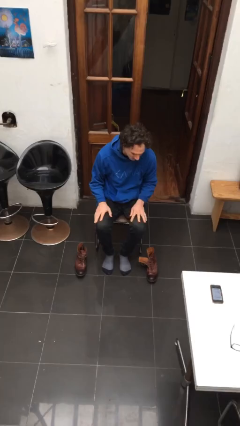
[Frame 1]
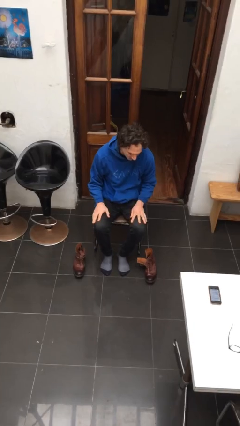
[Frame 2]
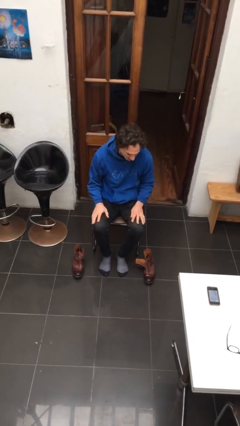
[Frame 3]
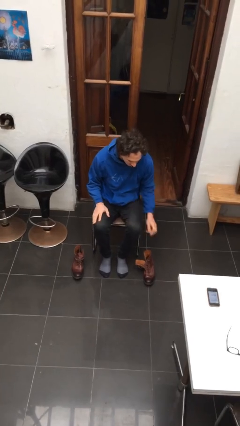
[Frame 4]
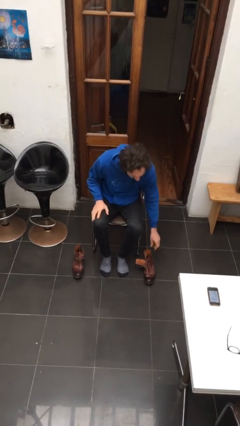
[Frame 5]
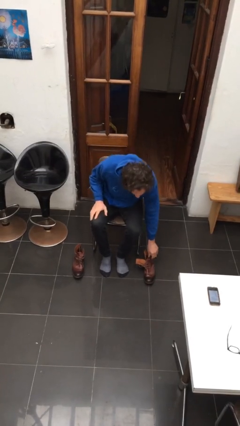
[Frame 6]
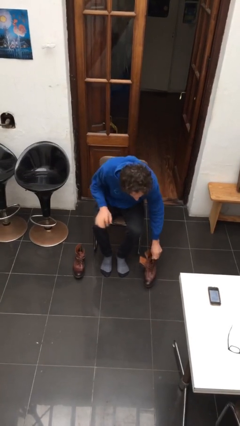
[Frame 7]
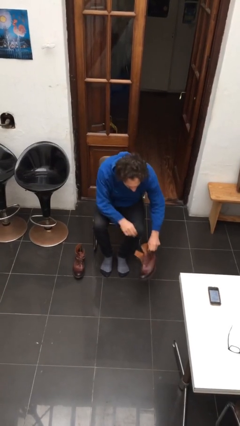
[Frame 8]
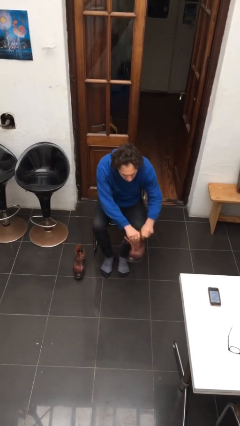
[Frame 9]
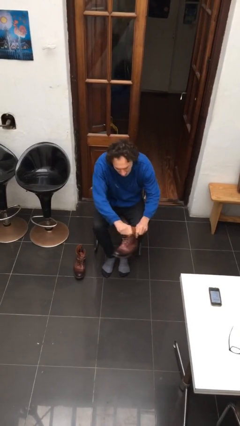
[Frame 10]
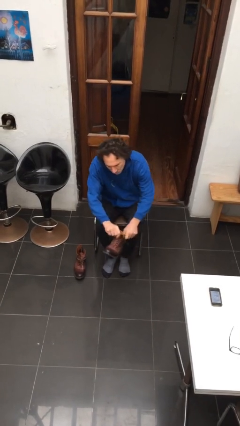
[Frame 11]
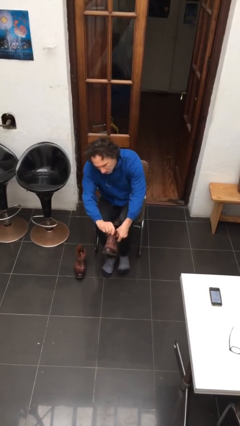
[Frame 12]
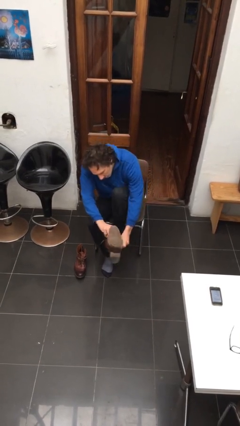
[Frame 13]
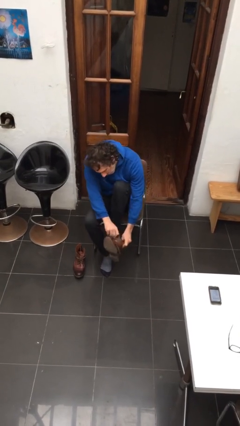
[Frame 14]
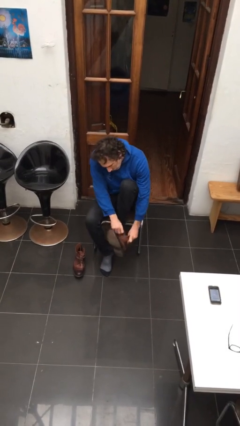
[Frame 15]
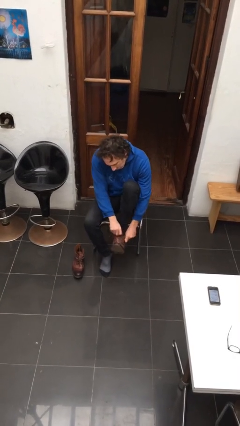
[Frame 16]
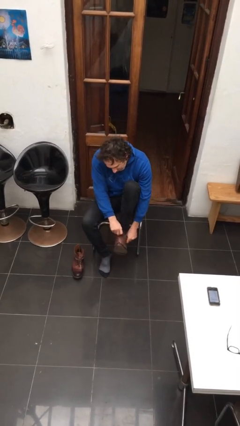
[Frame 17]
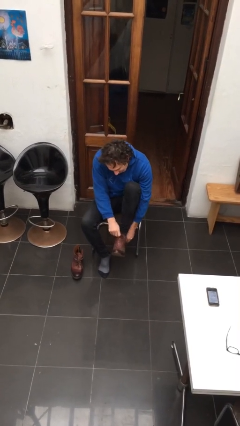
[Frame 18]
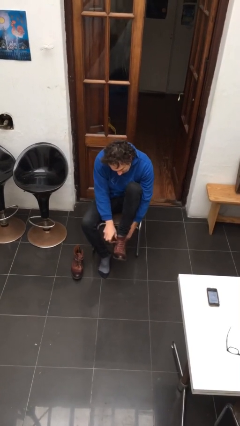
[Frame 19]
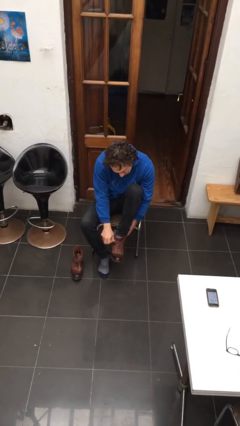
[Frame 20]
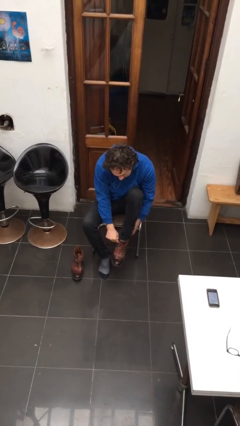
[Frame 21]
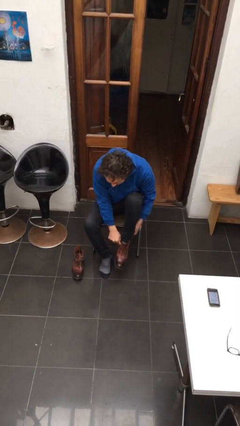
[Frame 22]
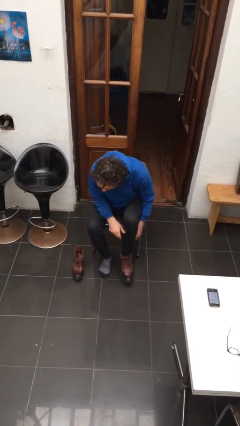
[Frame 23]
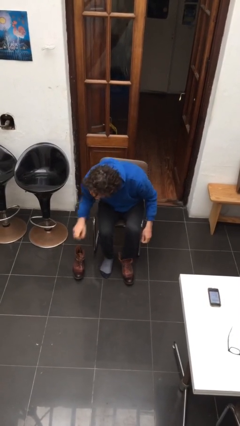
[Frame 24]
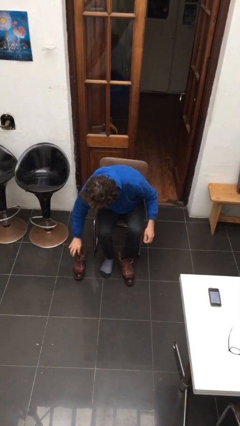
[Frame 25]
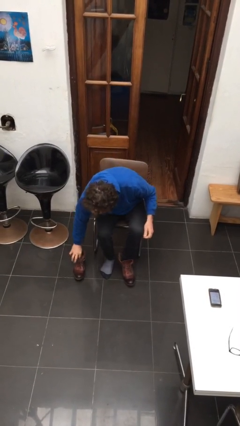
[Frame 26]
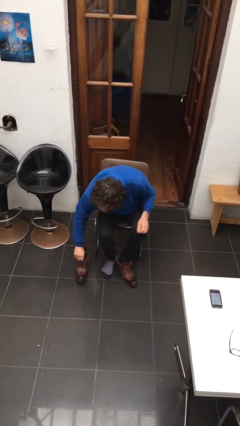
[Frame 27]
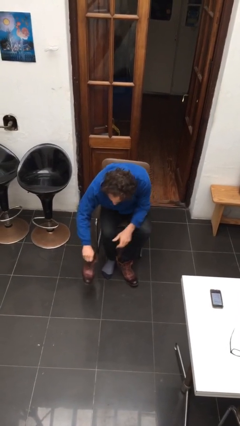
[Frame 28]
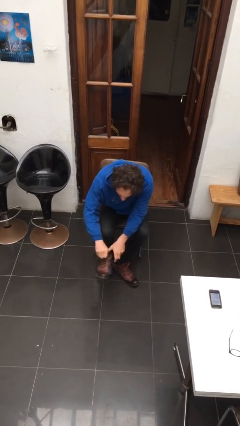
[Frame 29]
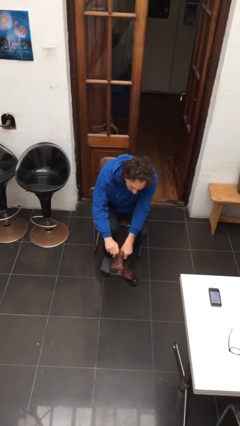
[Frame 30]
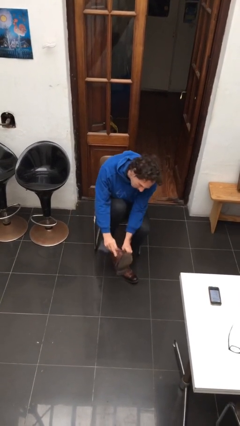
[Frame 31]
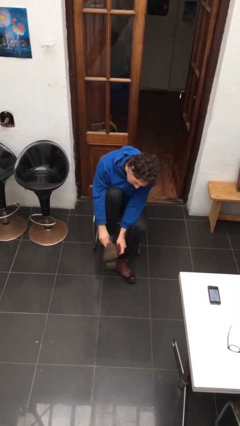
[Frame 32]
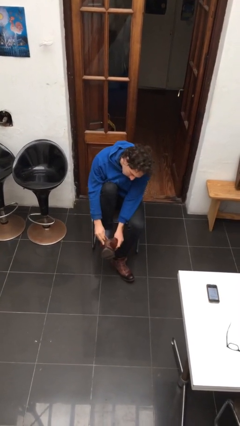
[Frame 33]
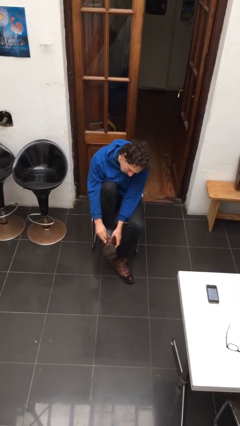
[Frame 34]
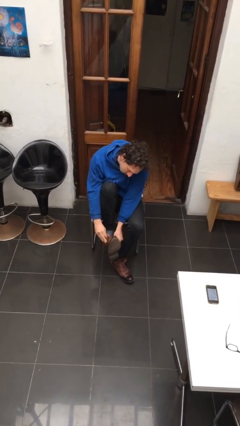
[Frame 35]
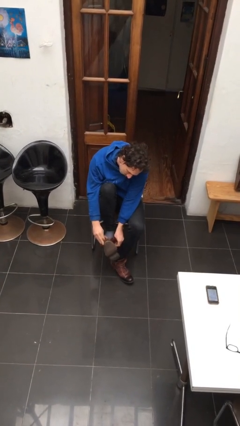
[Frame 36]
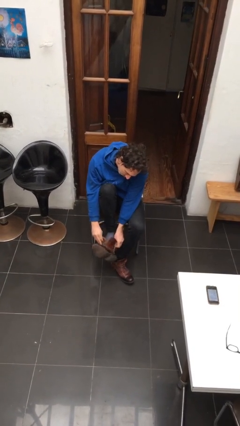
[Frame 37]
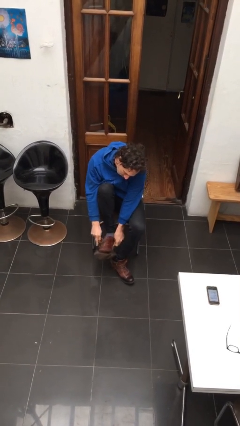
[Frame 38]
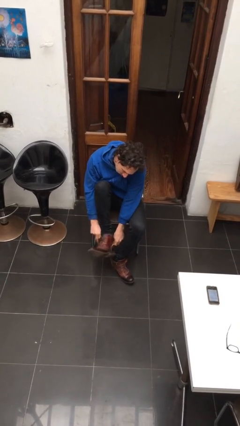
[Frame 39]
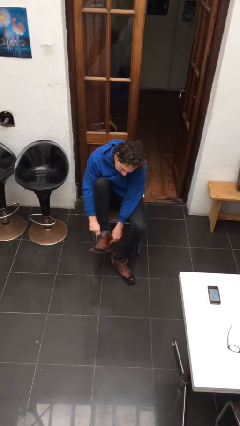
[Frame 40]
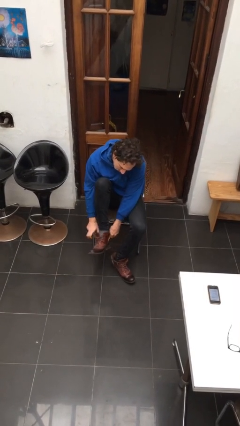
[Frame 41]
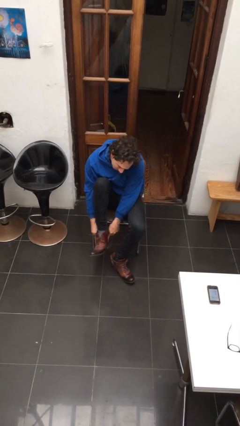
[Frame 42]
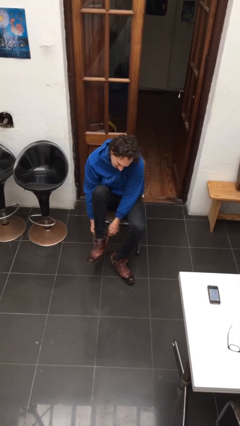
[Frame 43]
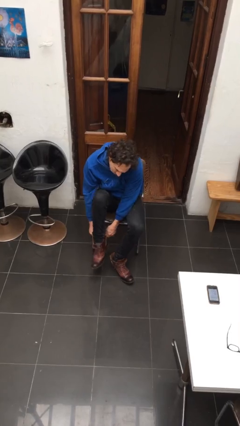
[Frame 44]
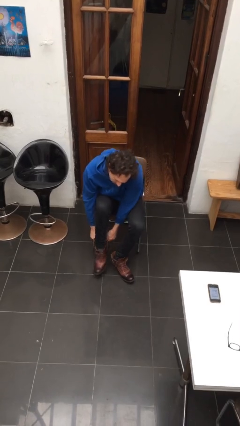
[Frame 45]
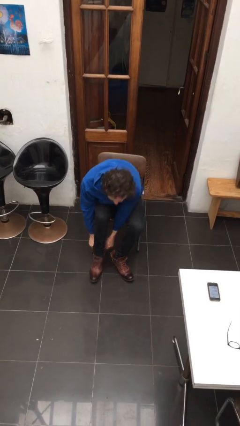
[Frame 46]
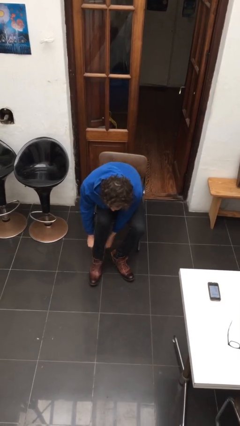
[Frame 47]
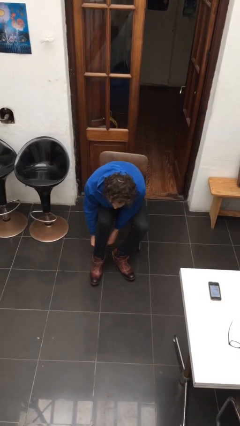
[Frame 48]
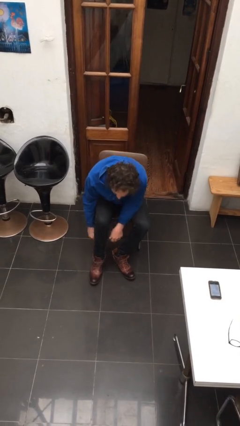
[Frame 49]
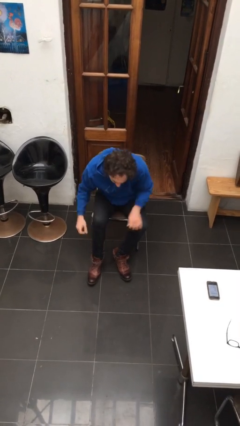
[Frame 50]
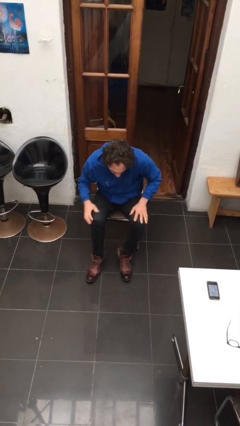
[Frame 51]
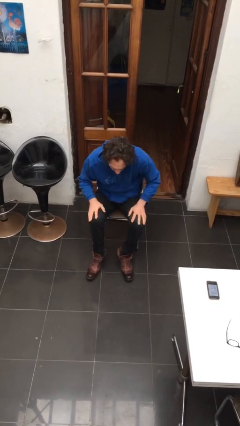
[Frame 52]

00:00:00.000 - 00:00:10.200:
person puts on boots

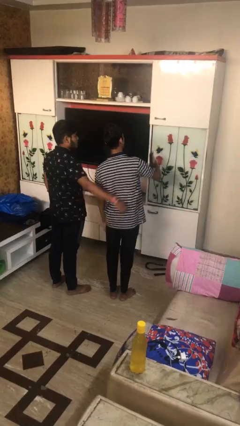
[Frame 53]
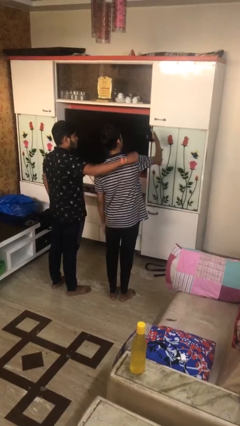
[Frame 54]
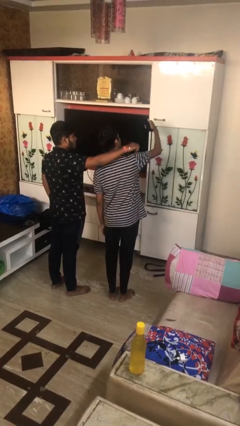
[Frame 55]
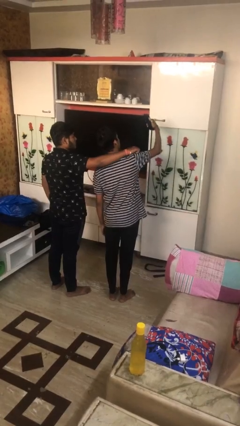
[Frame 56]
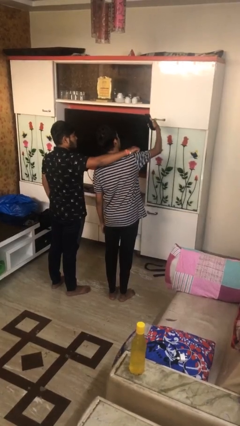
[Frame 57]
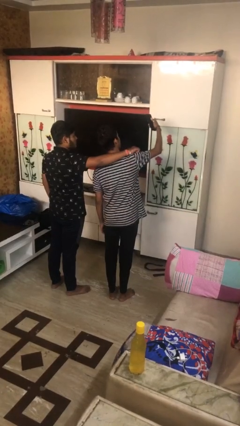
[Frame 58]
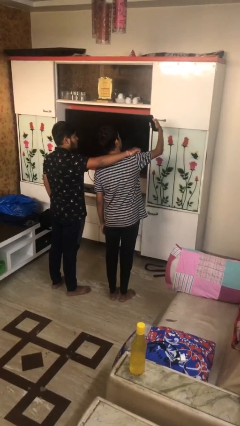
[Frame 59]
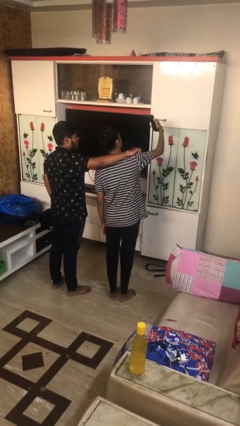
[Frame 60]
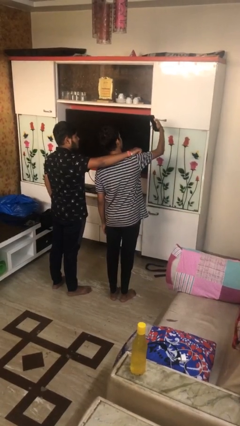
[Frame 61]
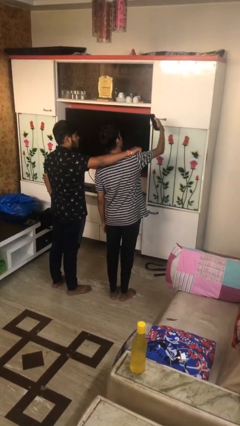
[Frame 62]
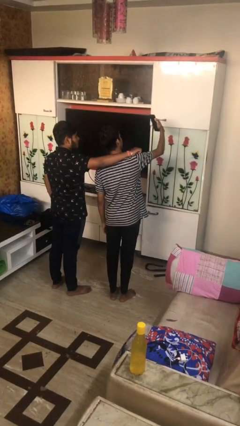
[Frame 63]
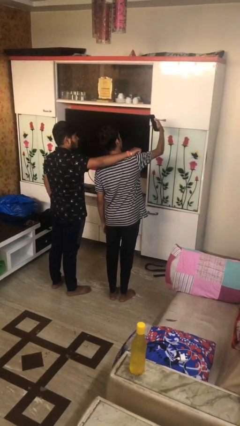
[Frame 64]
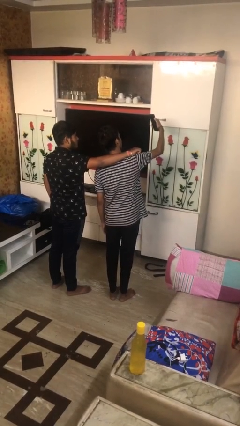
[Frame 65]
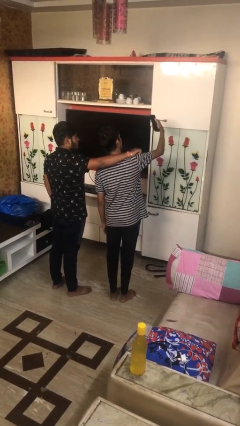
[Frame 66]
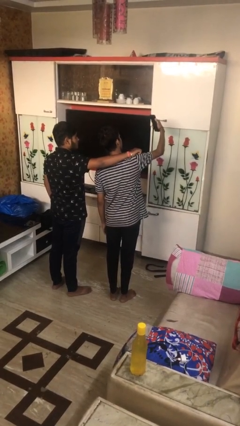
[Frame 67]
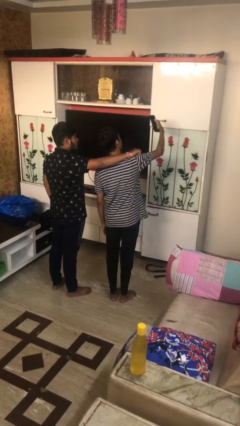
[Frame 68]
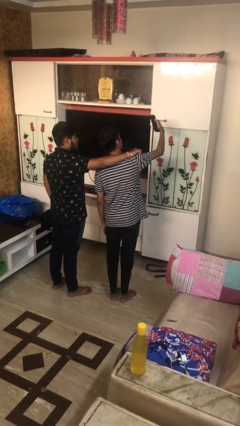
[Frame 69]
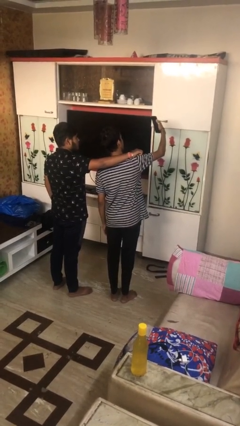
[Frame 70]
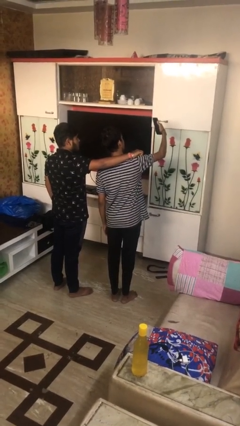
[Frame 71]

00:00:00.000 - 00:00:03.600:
person takes selfie with person

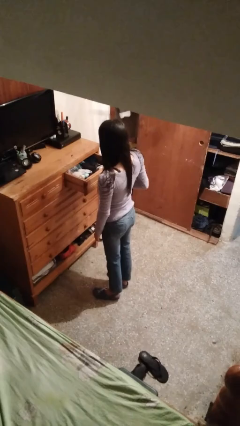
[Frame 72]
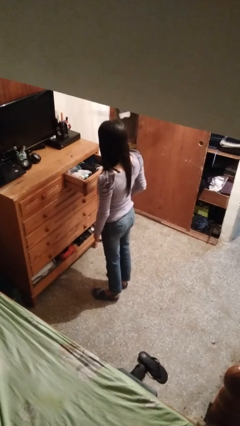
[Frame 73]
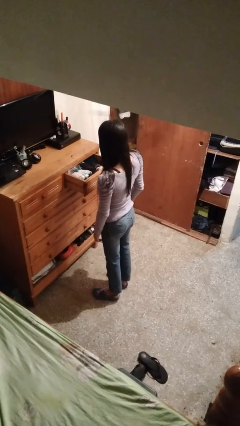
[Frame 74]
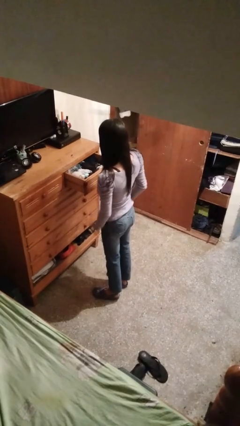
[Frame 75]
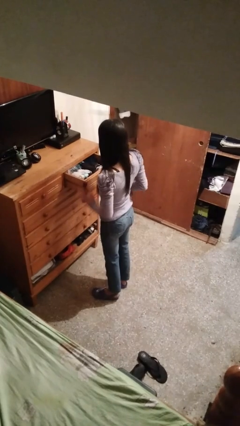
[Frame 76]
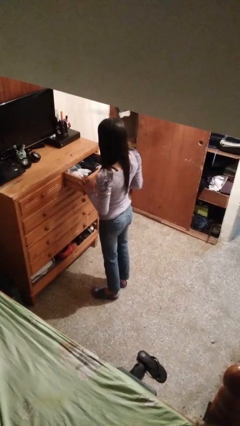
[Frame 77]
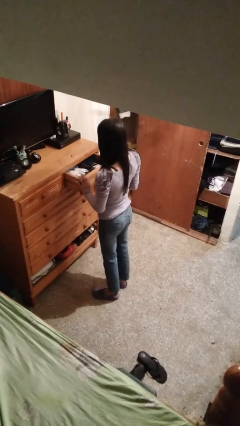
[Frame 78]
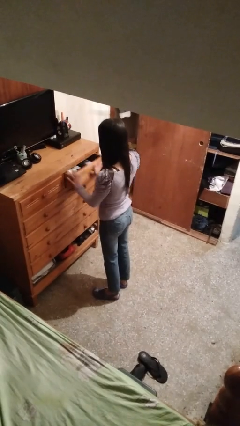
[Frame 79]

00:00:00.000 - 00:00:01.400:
person closes dresser drawer

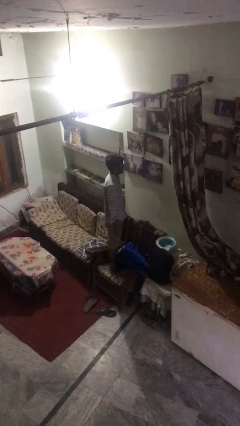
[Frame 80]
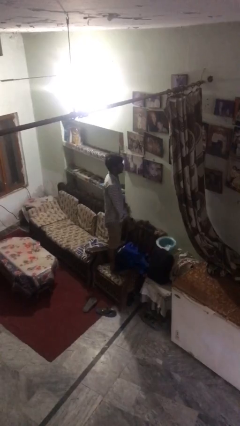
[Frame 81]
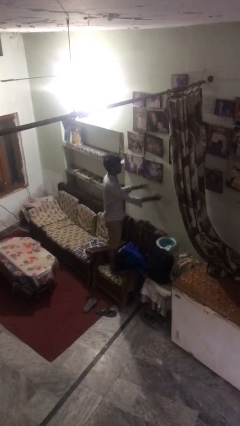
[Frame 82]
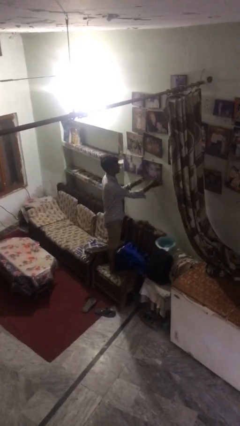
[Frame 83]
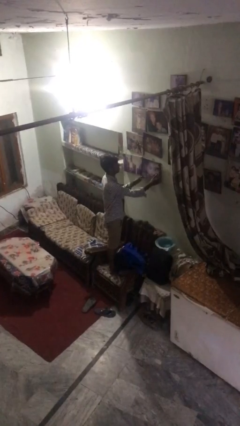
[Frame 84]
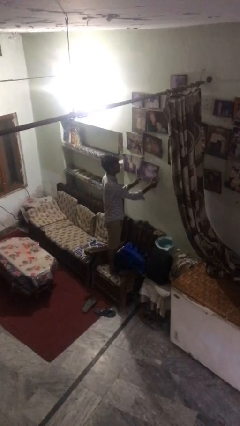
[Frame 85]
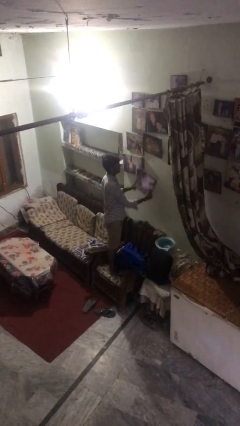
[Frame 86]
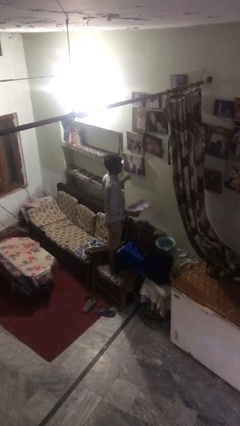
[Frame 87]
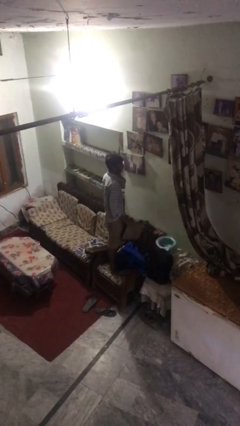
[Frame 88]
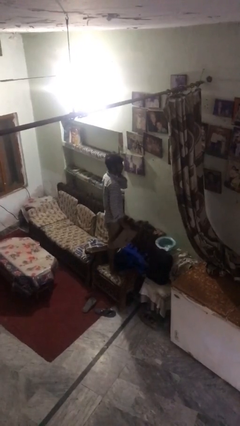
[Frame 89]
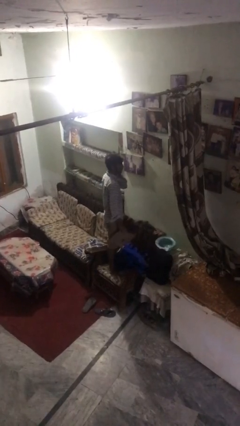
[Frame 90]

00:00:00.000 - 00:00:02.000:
person takes down picture frame

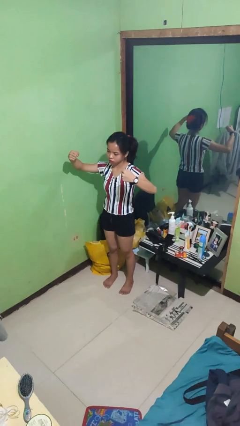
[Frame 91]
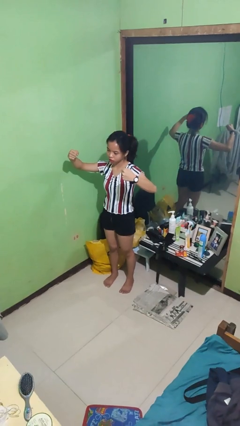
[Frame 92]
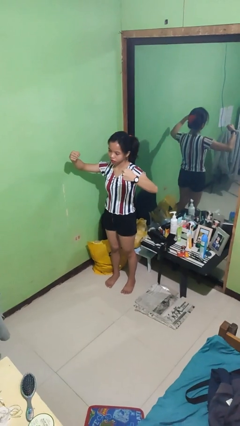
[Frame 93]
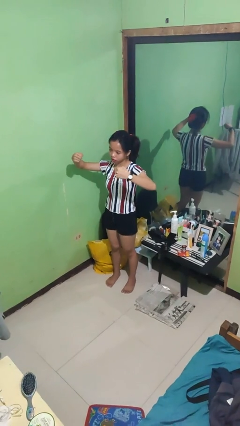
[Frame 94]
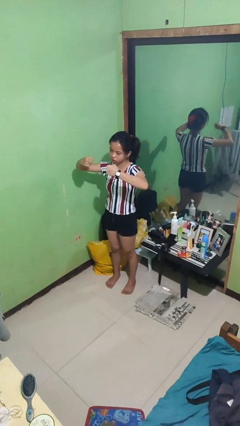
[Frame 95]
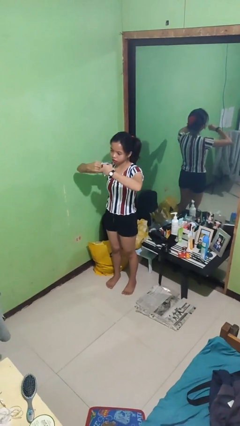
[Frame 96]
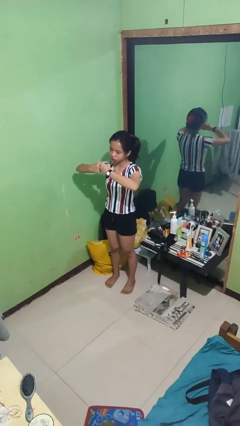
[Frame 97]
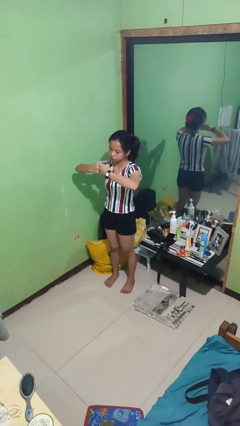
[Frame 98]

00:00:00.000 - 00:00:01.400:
person gestures zoom out
